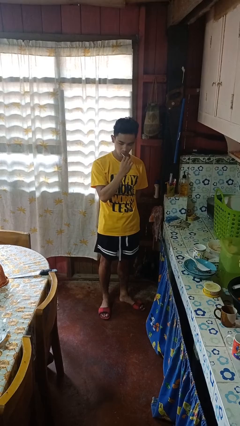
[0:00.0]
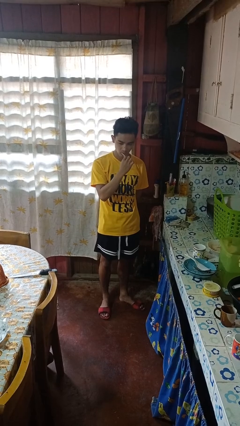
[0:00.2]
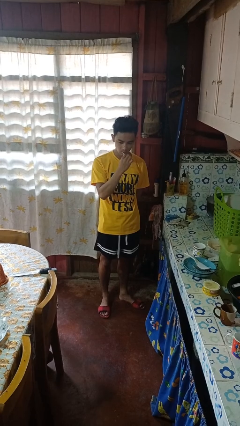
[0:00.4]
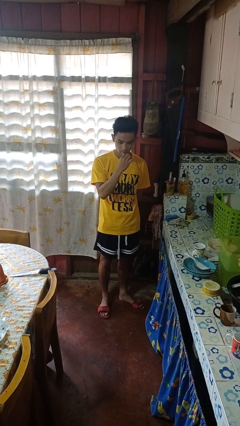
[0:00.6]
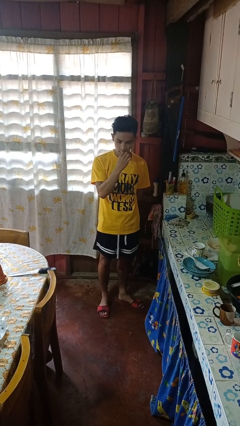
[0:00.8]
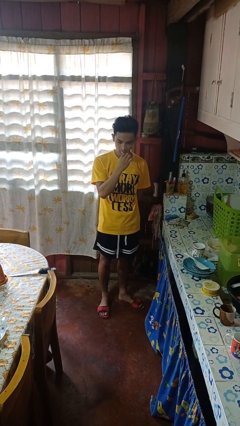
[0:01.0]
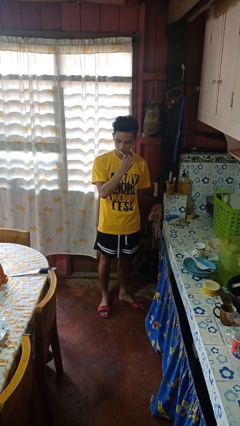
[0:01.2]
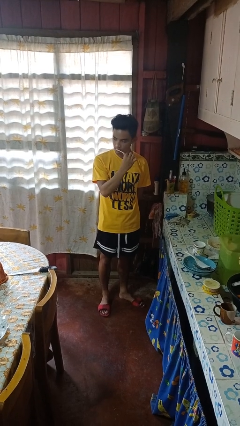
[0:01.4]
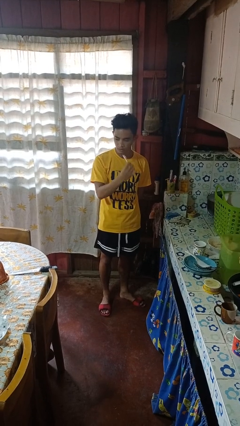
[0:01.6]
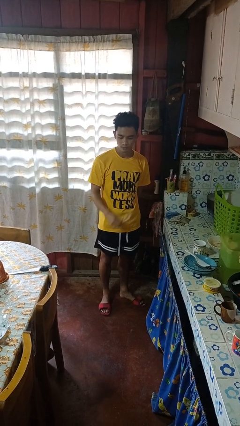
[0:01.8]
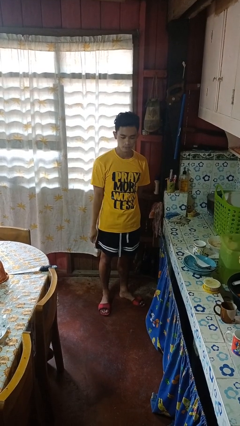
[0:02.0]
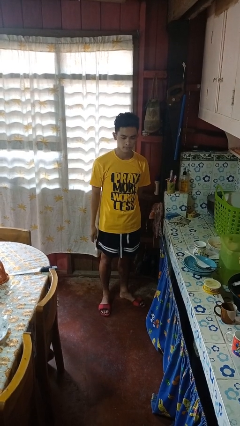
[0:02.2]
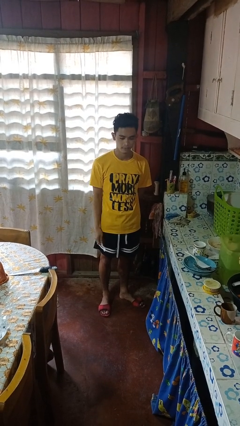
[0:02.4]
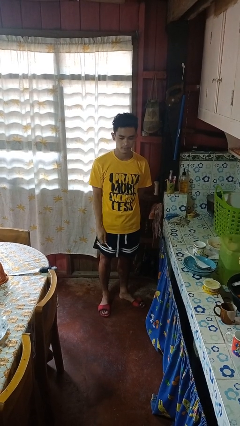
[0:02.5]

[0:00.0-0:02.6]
person brushes teeth

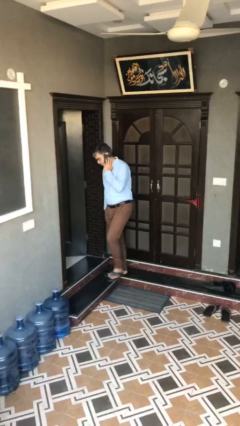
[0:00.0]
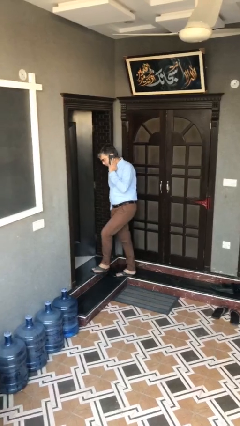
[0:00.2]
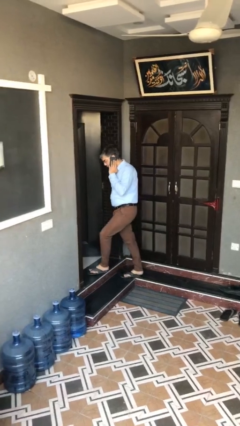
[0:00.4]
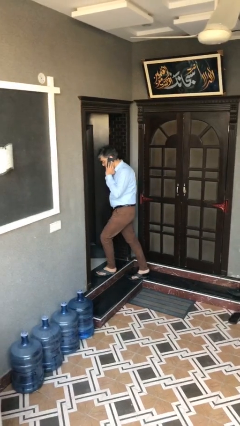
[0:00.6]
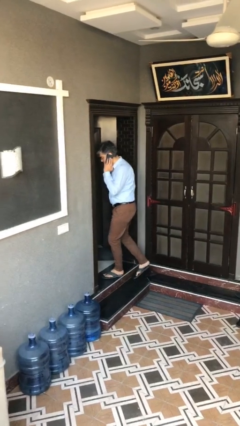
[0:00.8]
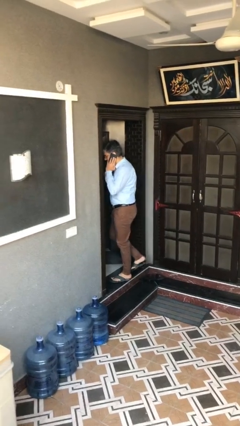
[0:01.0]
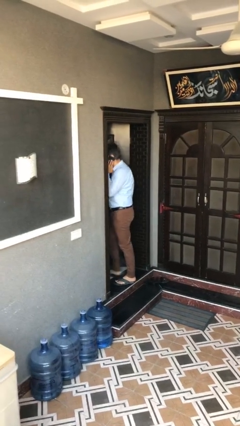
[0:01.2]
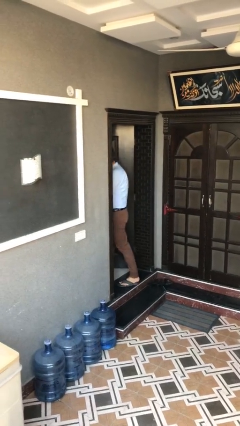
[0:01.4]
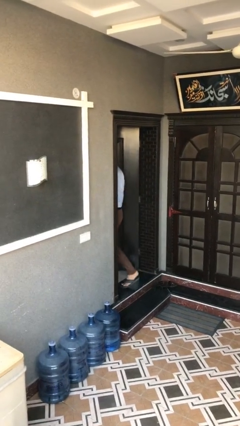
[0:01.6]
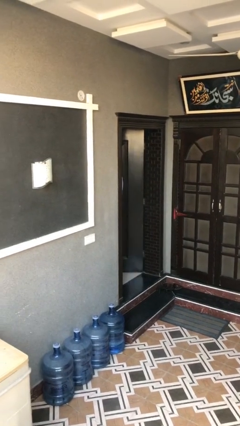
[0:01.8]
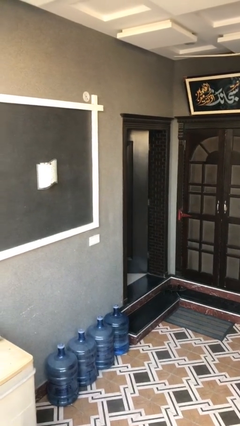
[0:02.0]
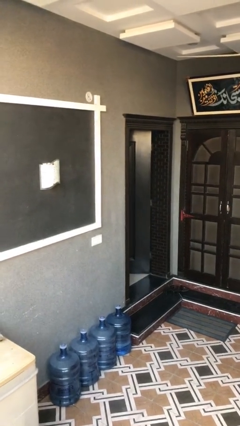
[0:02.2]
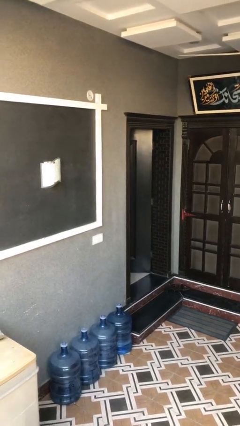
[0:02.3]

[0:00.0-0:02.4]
person exits scene through structure

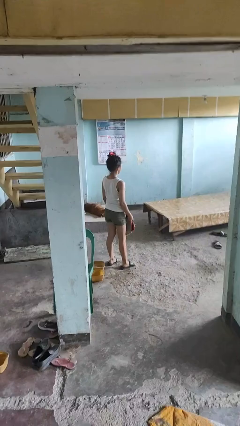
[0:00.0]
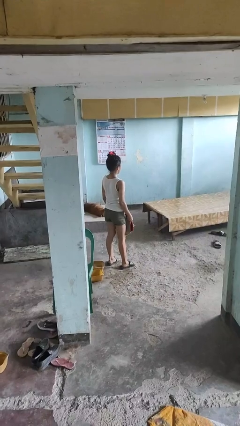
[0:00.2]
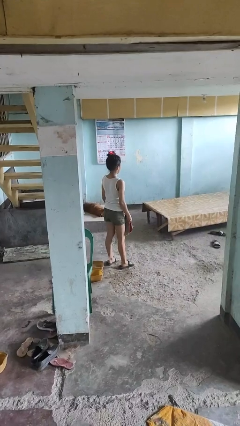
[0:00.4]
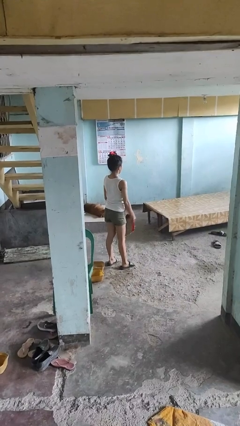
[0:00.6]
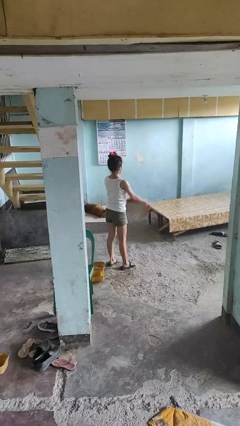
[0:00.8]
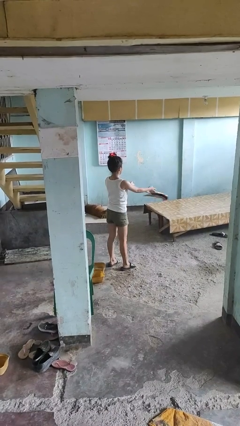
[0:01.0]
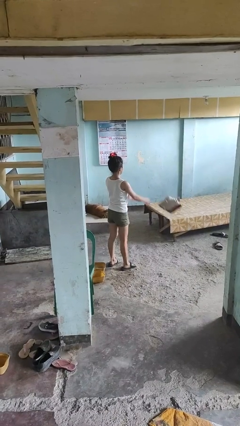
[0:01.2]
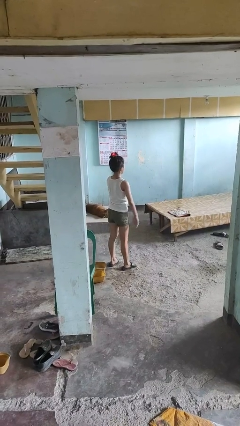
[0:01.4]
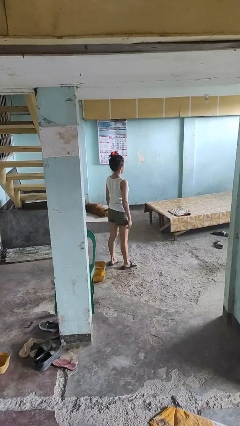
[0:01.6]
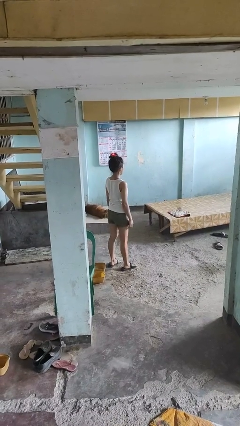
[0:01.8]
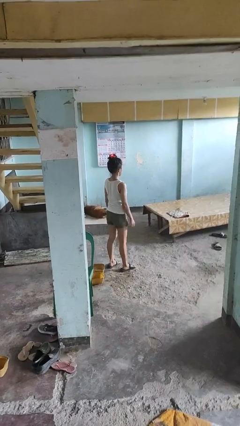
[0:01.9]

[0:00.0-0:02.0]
person throws object on table

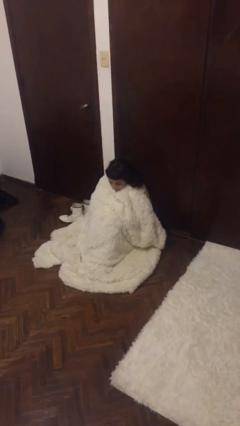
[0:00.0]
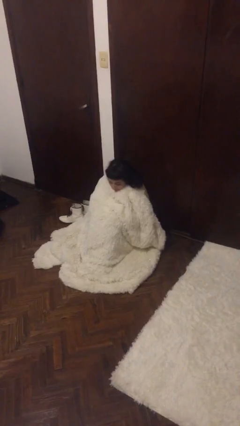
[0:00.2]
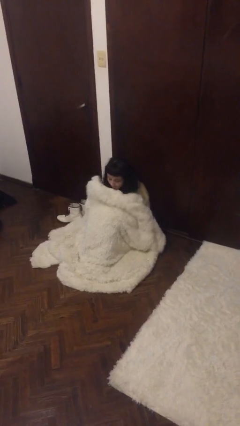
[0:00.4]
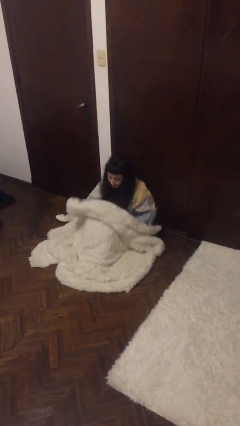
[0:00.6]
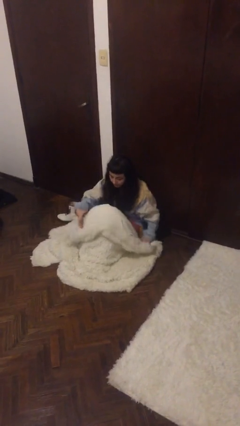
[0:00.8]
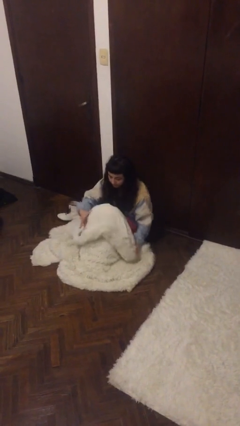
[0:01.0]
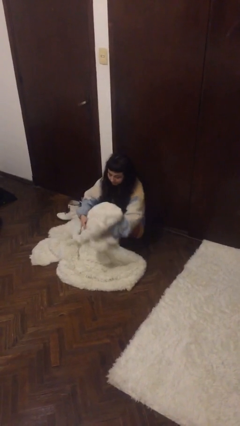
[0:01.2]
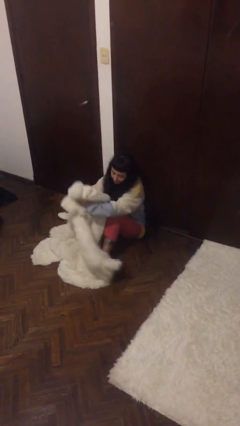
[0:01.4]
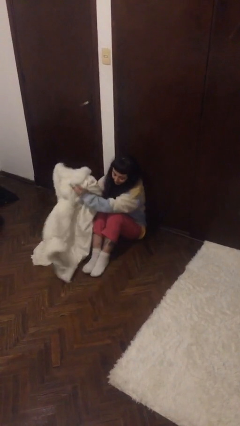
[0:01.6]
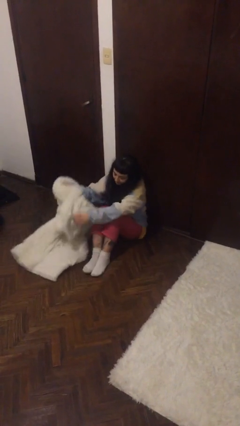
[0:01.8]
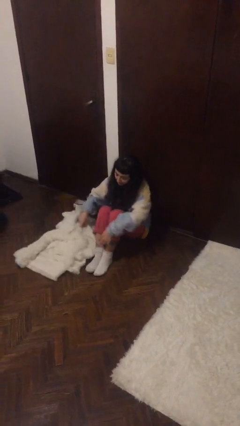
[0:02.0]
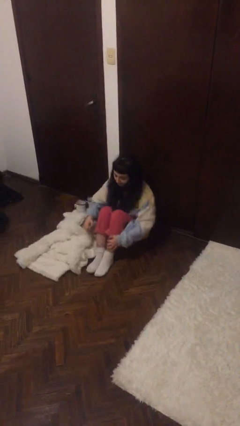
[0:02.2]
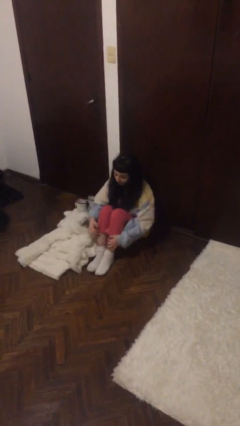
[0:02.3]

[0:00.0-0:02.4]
person uncovers with blanket

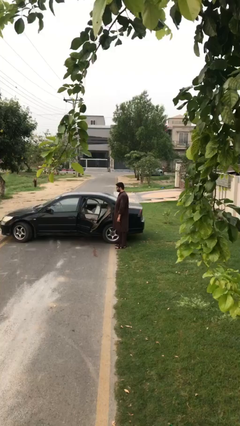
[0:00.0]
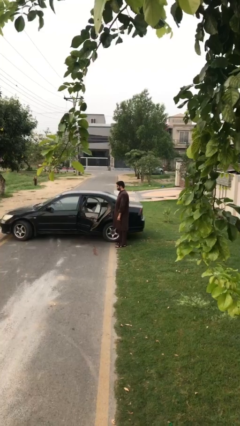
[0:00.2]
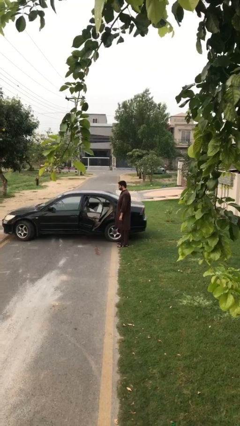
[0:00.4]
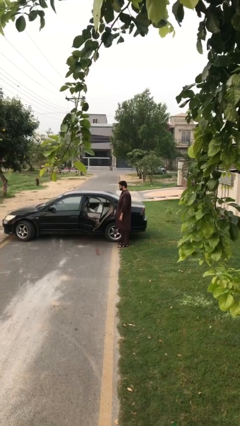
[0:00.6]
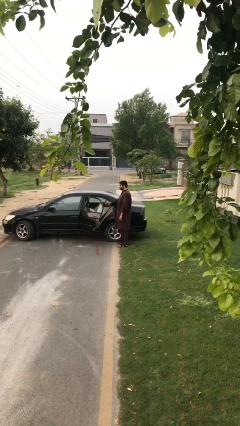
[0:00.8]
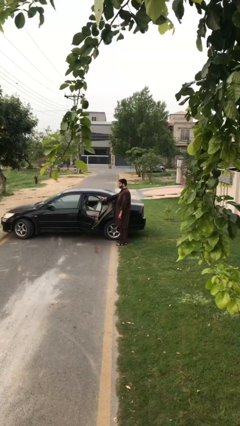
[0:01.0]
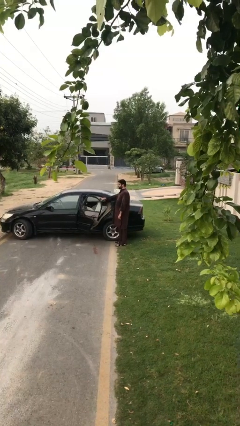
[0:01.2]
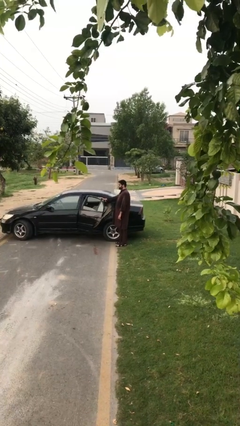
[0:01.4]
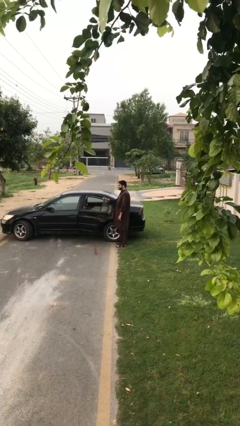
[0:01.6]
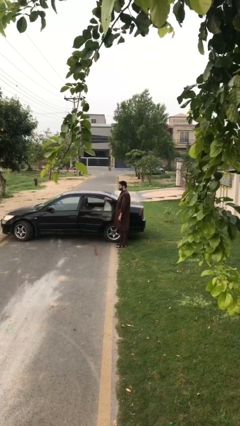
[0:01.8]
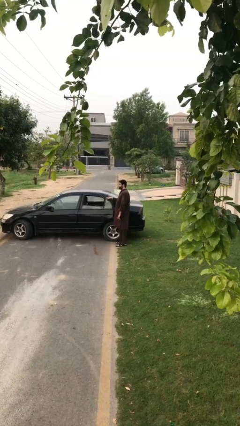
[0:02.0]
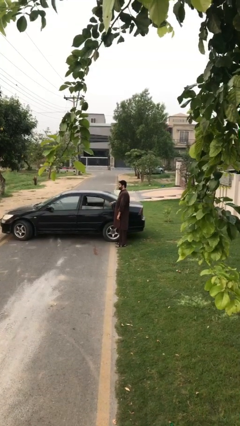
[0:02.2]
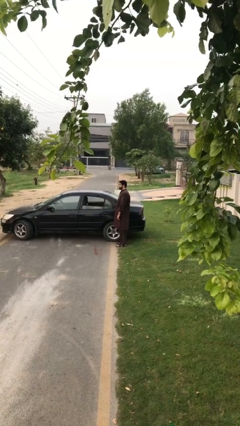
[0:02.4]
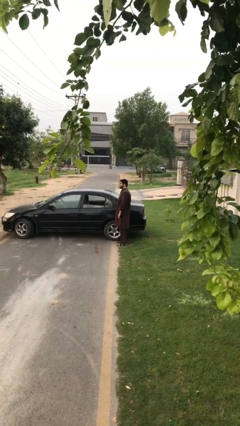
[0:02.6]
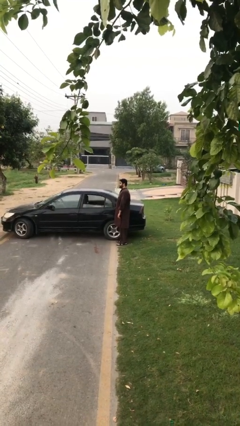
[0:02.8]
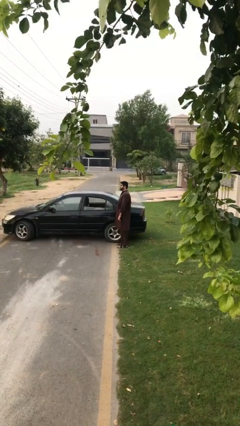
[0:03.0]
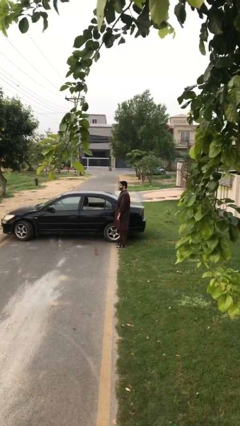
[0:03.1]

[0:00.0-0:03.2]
person closes car door

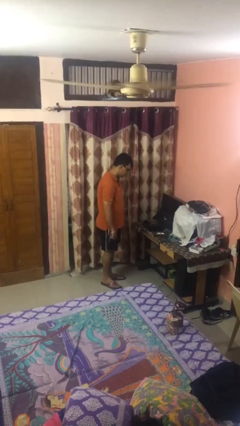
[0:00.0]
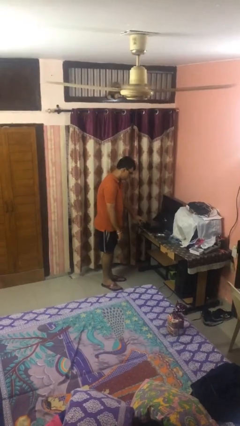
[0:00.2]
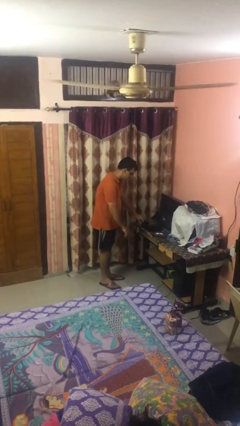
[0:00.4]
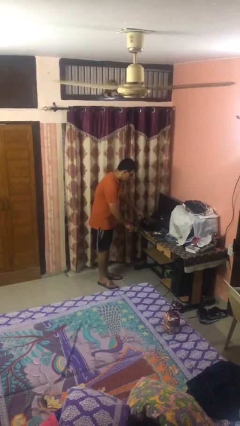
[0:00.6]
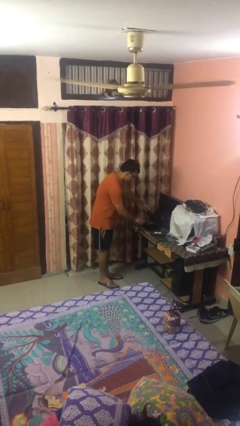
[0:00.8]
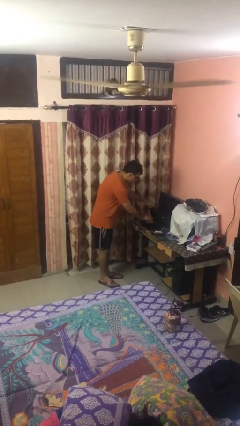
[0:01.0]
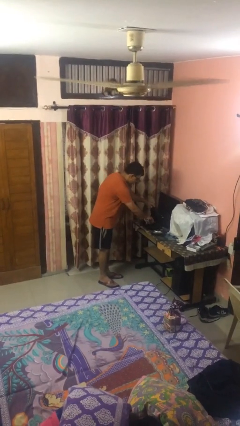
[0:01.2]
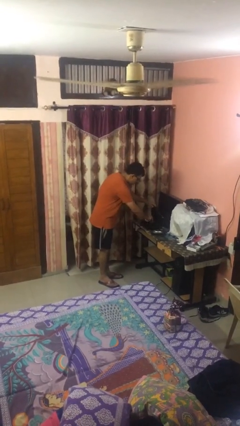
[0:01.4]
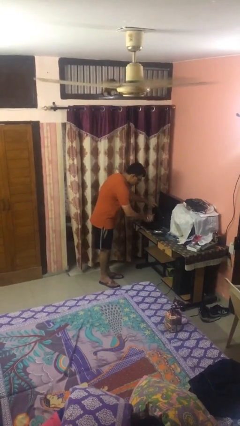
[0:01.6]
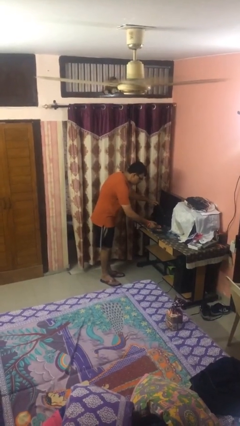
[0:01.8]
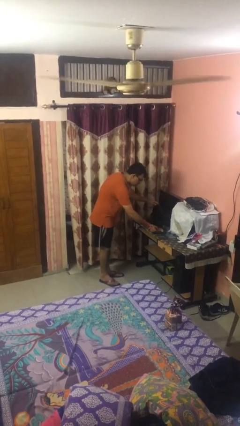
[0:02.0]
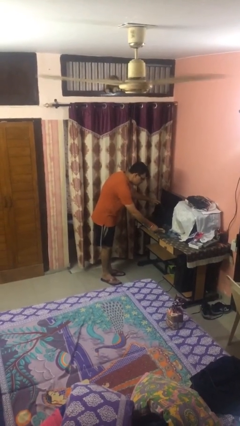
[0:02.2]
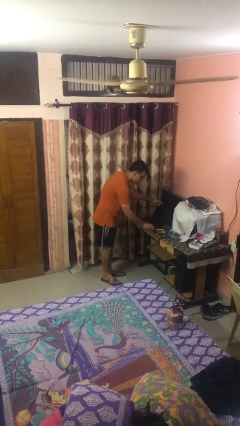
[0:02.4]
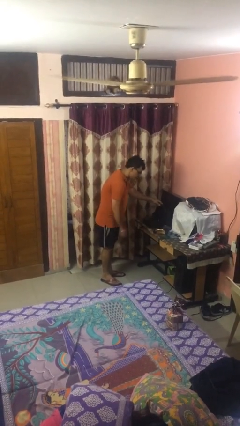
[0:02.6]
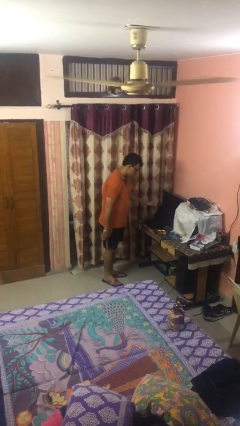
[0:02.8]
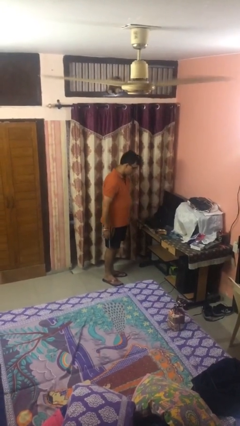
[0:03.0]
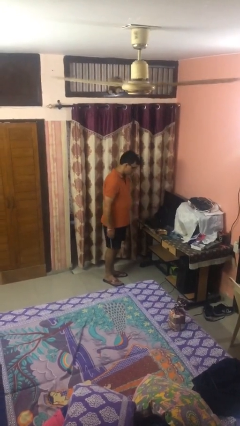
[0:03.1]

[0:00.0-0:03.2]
person takes object from toaster

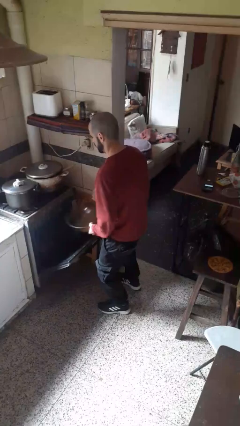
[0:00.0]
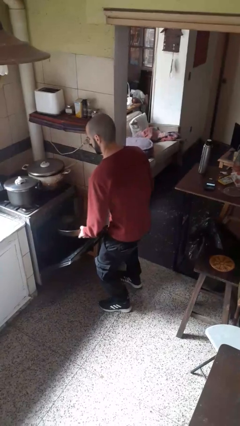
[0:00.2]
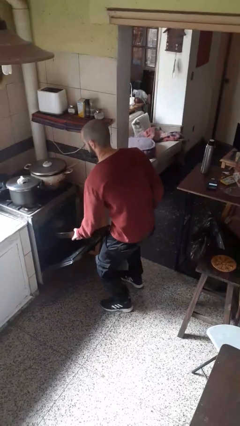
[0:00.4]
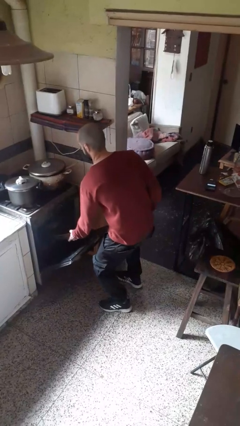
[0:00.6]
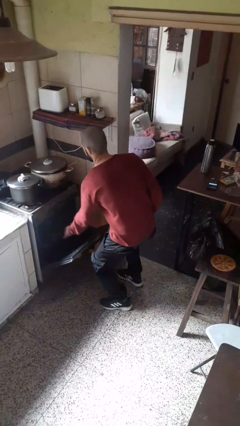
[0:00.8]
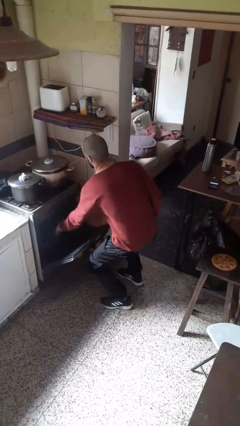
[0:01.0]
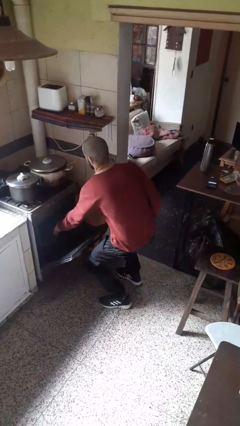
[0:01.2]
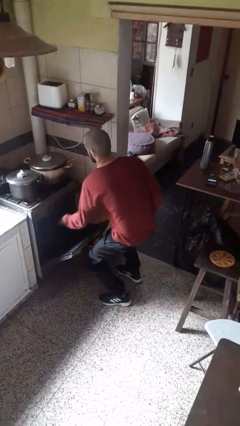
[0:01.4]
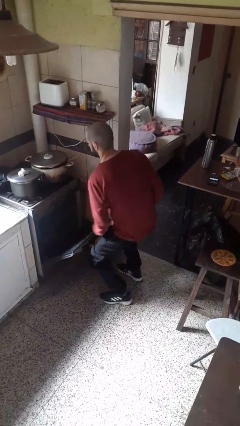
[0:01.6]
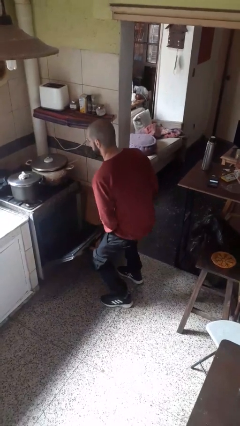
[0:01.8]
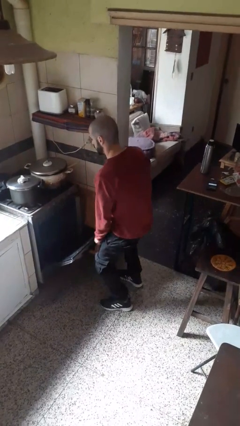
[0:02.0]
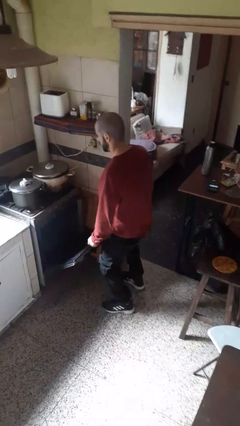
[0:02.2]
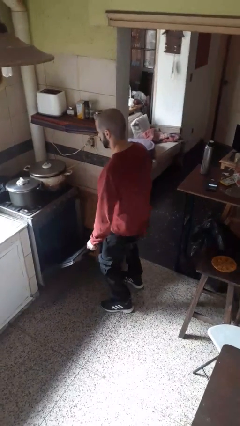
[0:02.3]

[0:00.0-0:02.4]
person puts object into oven
